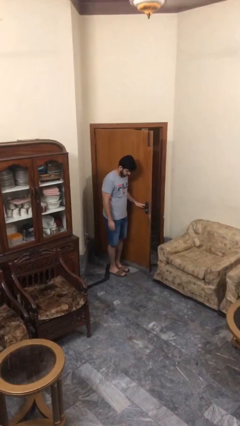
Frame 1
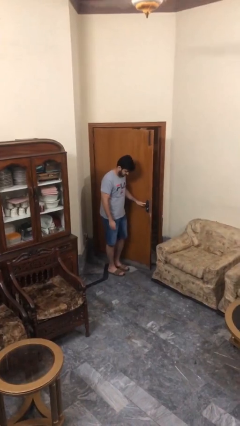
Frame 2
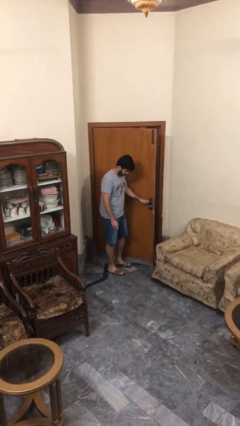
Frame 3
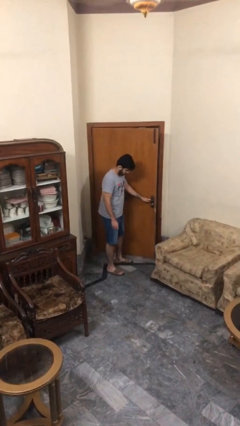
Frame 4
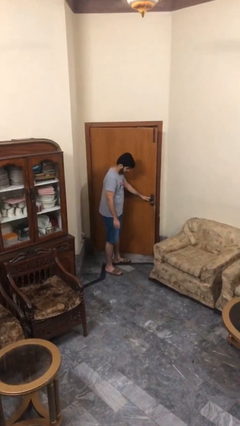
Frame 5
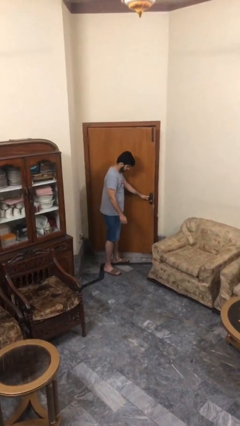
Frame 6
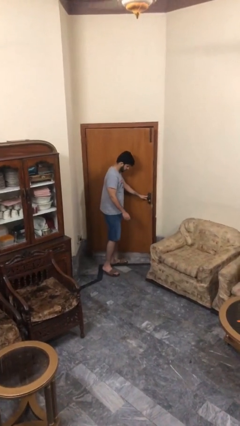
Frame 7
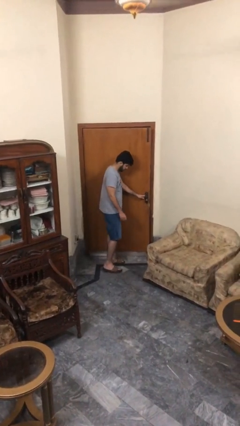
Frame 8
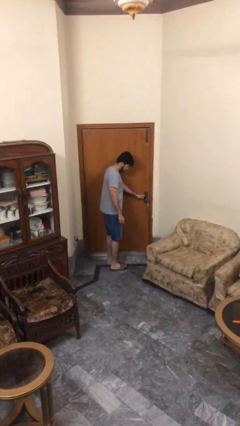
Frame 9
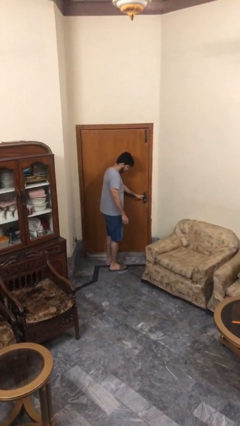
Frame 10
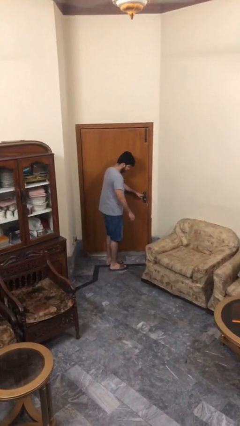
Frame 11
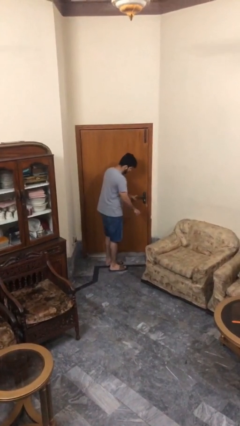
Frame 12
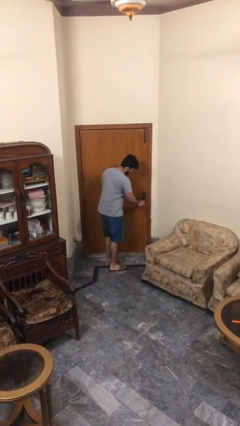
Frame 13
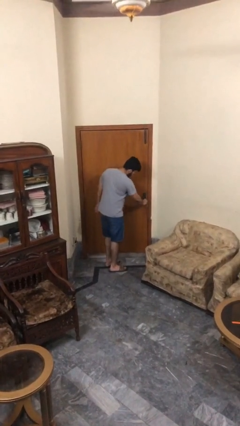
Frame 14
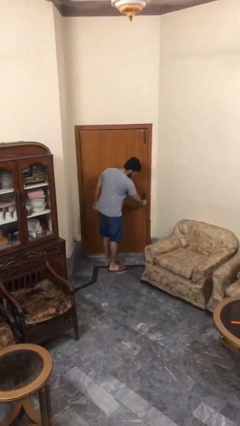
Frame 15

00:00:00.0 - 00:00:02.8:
person closes facility door

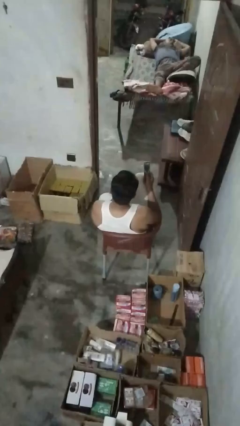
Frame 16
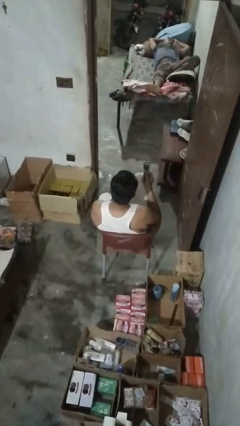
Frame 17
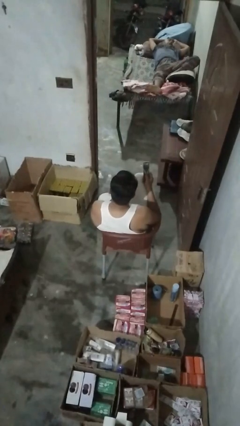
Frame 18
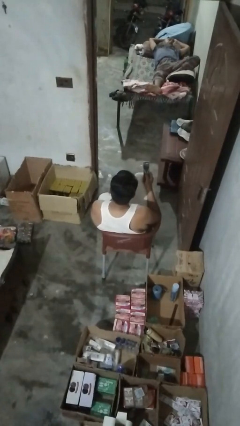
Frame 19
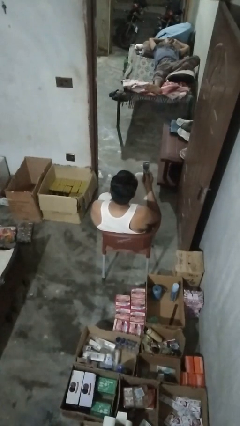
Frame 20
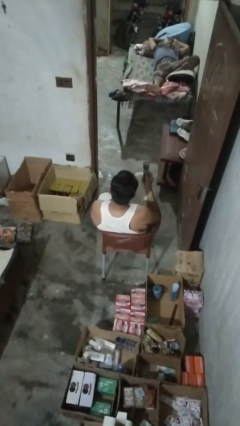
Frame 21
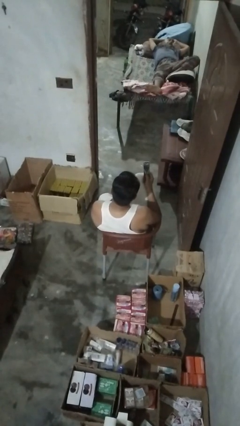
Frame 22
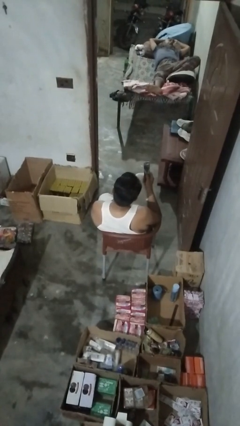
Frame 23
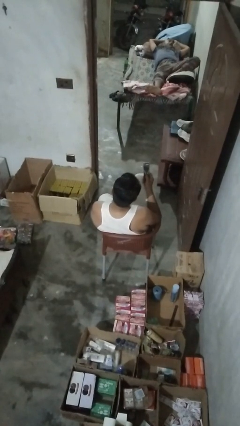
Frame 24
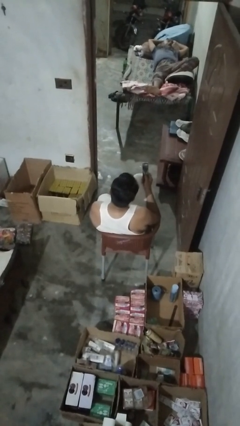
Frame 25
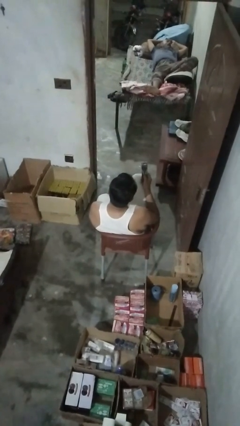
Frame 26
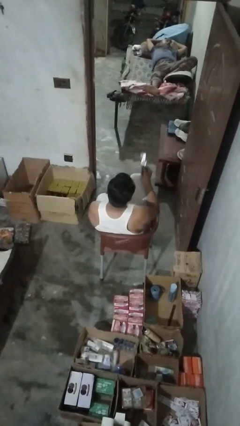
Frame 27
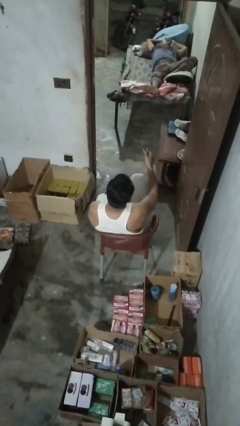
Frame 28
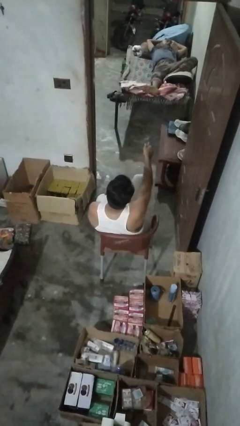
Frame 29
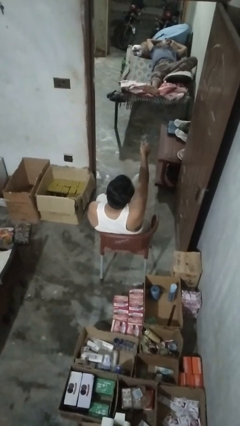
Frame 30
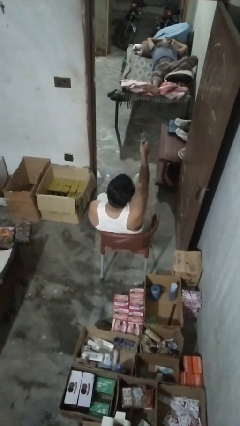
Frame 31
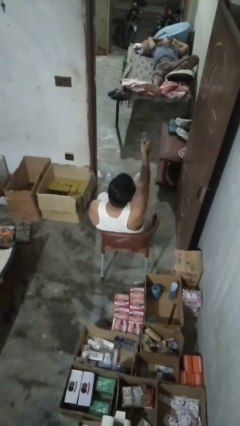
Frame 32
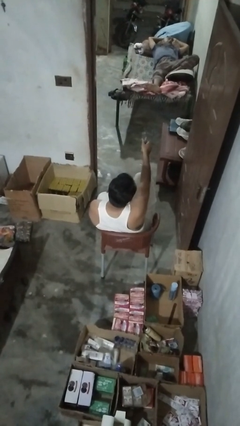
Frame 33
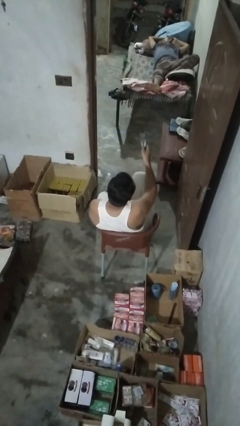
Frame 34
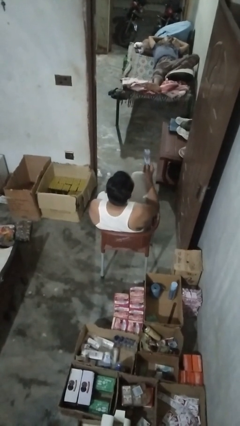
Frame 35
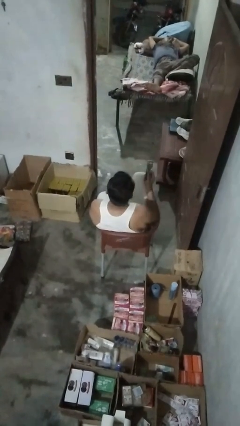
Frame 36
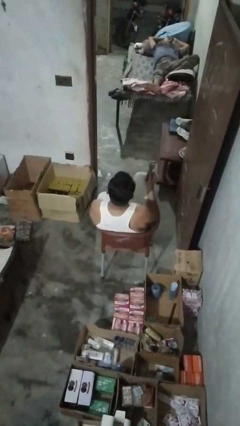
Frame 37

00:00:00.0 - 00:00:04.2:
person uses television remote

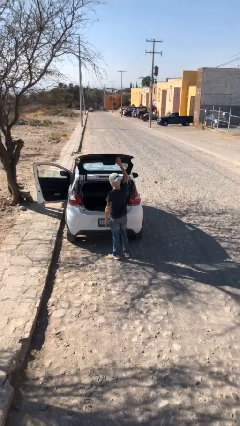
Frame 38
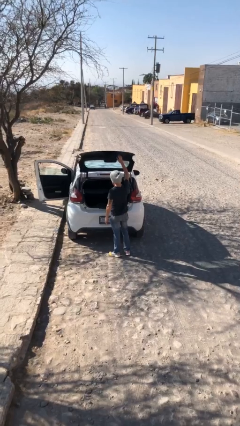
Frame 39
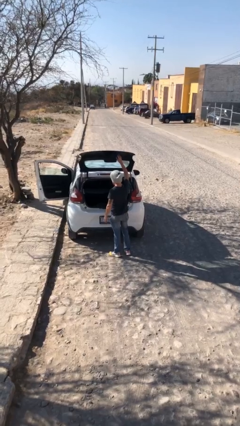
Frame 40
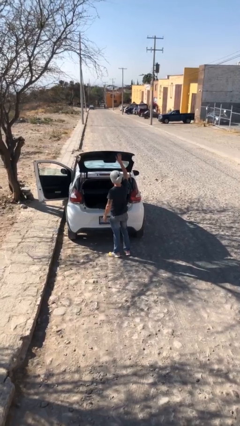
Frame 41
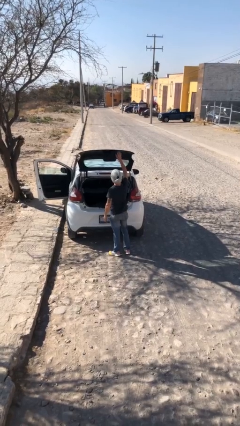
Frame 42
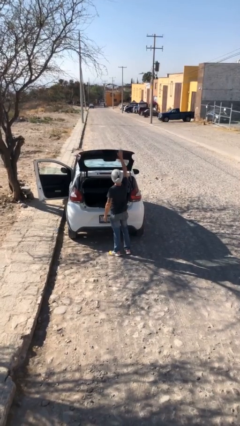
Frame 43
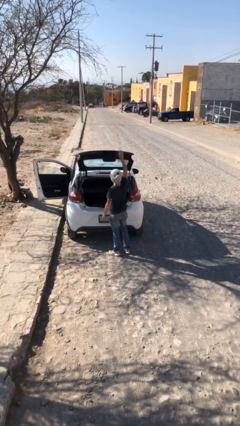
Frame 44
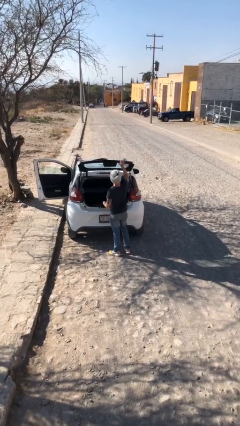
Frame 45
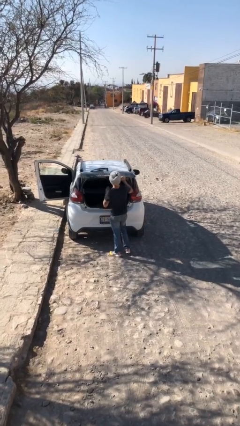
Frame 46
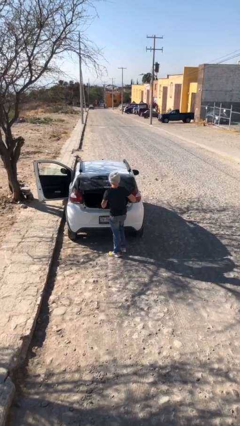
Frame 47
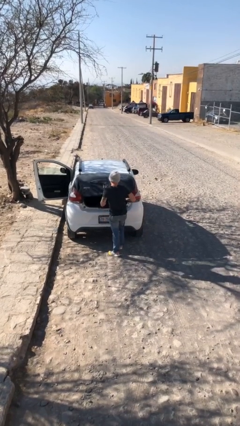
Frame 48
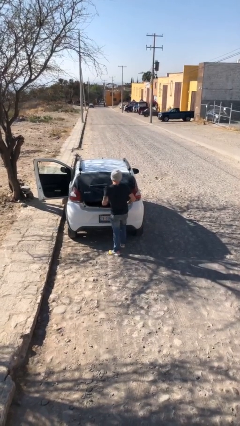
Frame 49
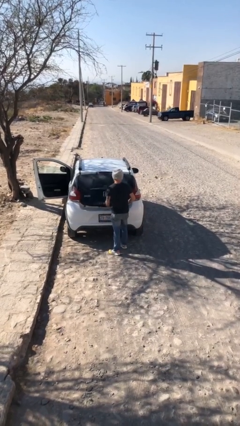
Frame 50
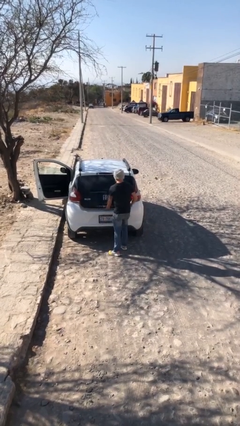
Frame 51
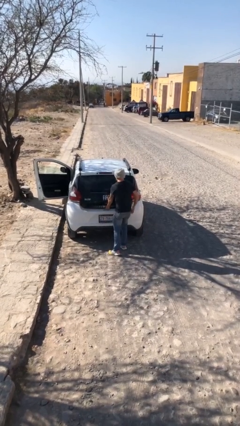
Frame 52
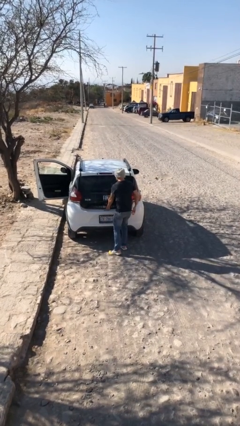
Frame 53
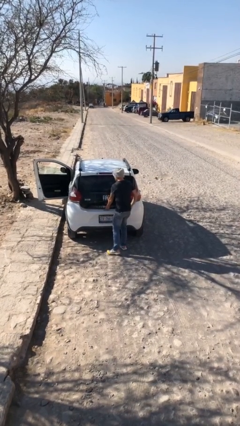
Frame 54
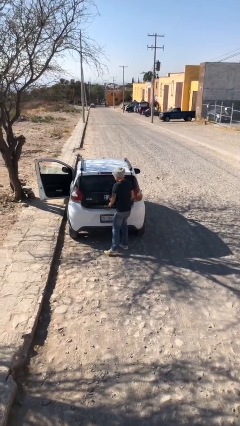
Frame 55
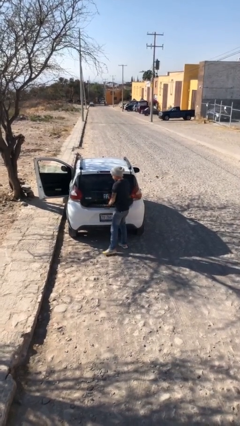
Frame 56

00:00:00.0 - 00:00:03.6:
person closes car trunk

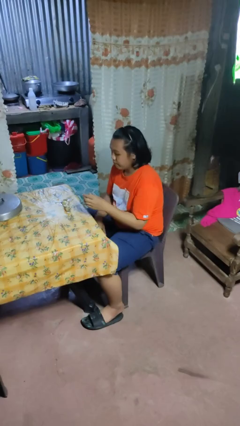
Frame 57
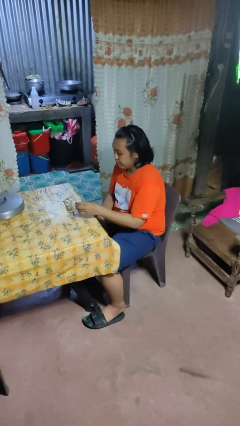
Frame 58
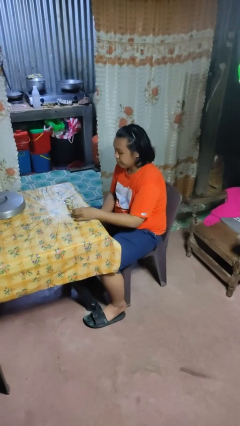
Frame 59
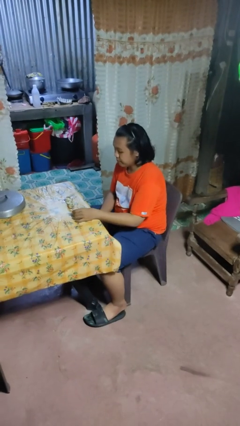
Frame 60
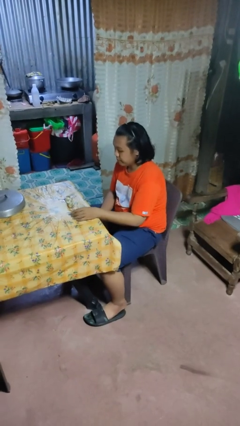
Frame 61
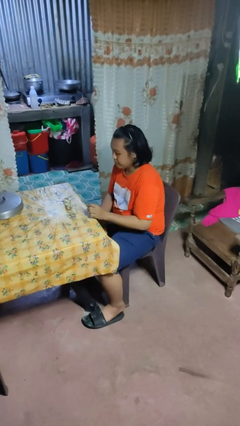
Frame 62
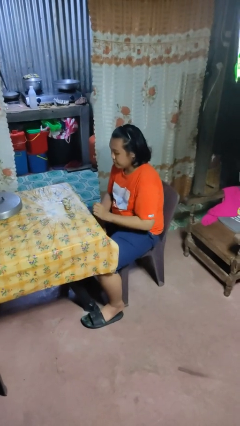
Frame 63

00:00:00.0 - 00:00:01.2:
person puts down object on table

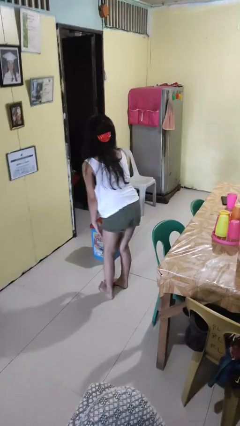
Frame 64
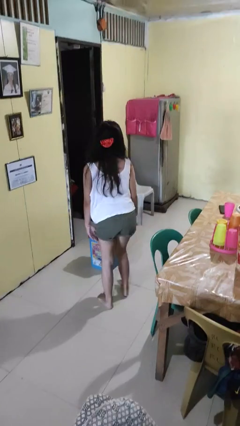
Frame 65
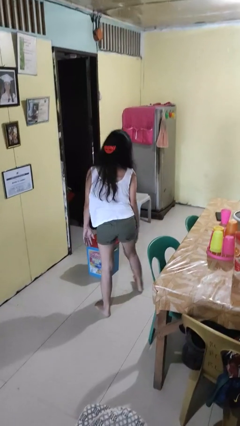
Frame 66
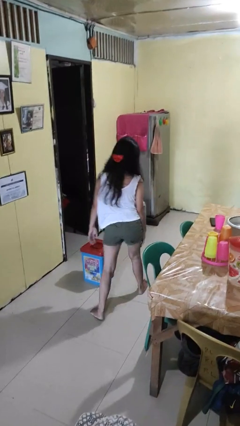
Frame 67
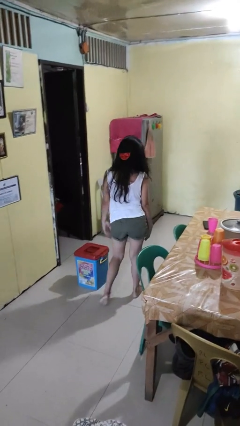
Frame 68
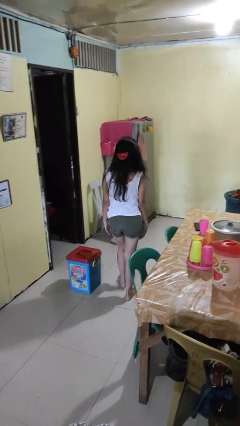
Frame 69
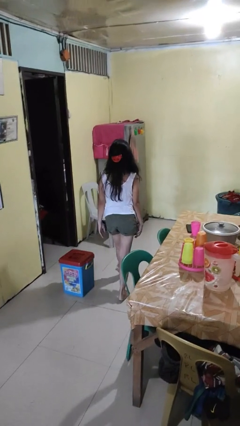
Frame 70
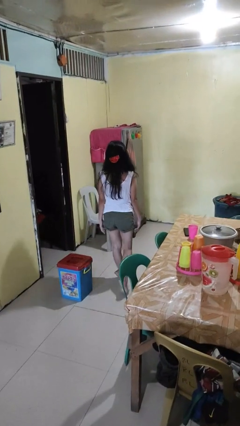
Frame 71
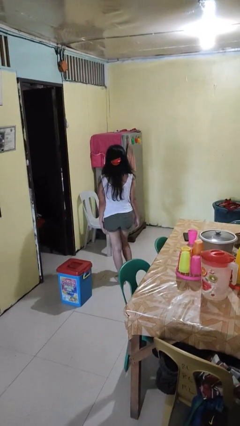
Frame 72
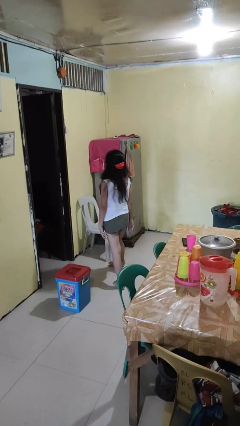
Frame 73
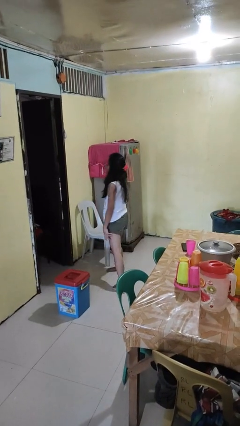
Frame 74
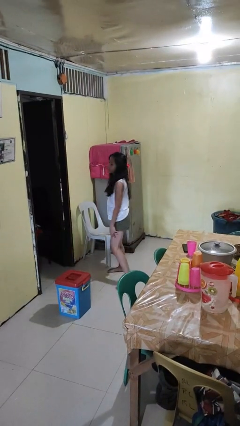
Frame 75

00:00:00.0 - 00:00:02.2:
person stands up from floor

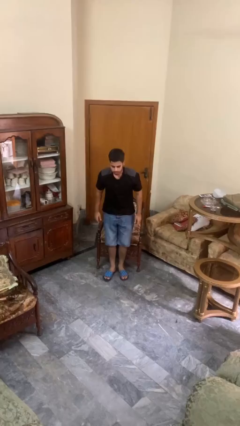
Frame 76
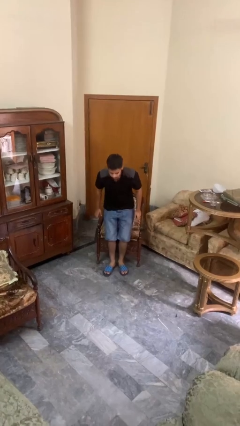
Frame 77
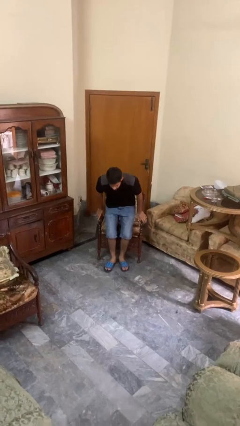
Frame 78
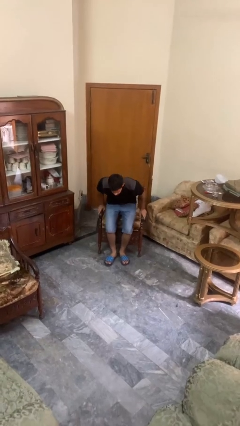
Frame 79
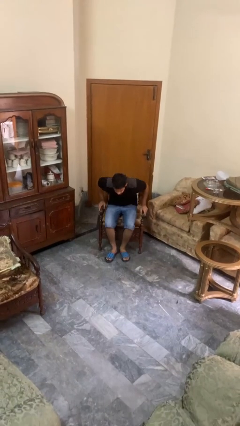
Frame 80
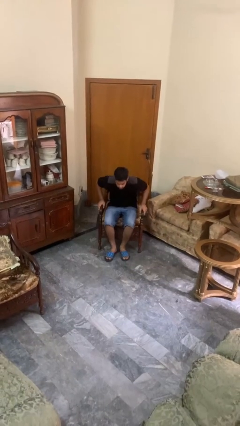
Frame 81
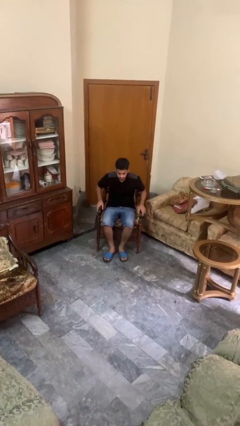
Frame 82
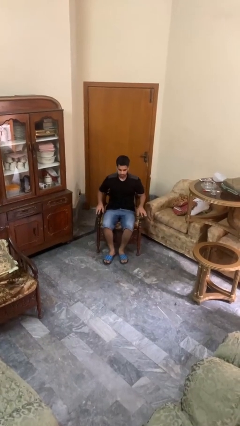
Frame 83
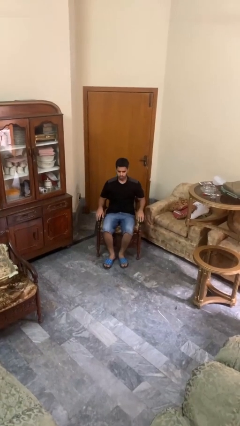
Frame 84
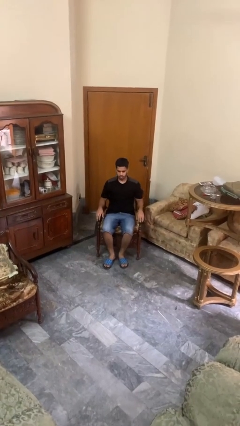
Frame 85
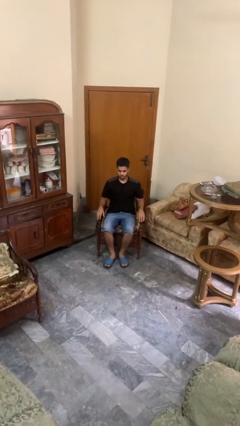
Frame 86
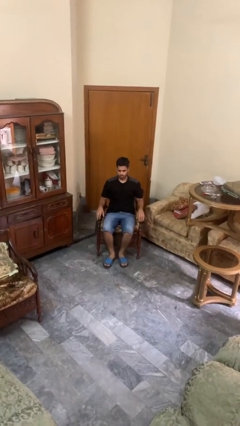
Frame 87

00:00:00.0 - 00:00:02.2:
person sits down

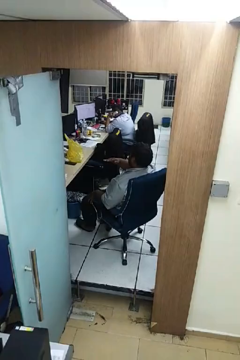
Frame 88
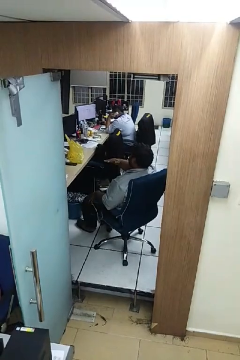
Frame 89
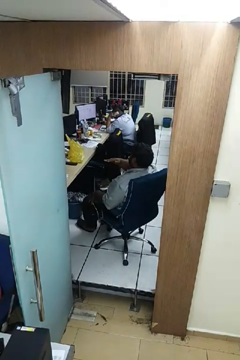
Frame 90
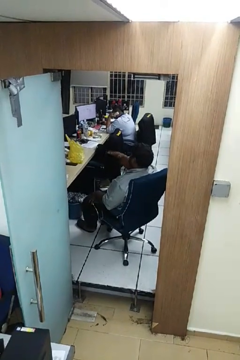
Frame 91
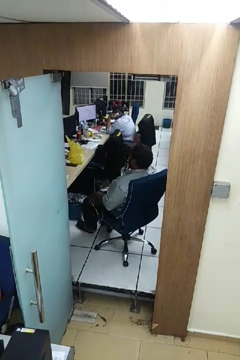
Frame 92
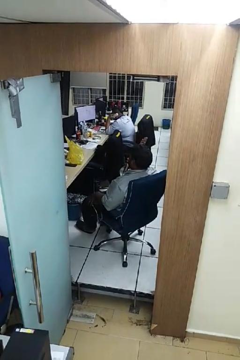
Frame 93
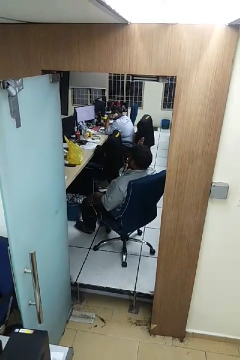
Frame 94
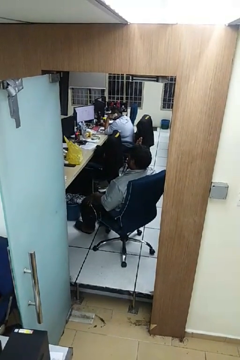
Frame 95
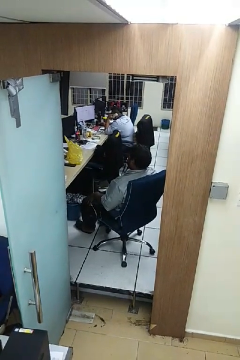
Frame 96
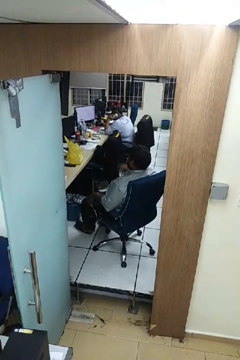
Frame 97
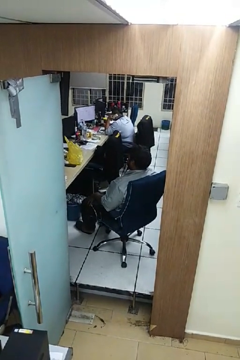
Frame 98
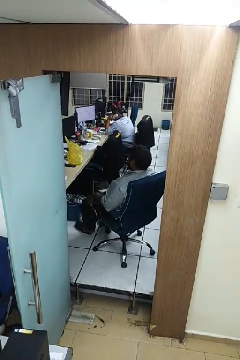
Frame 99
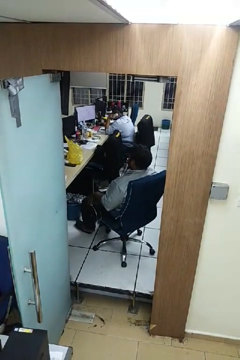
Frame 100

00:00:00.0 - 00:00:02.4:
person gestures swipe right
